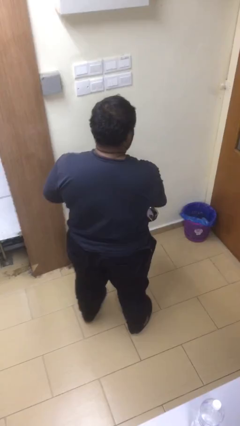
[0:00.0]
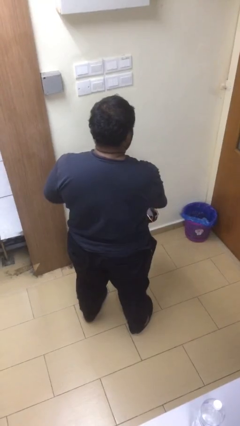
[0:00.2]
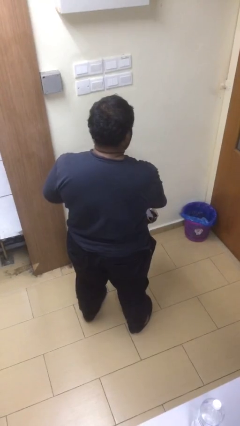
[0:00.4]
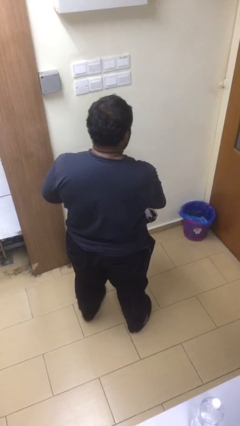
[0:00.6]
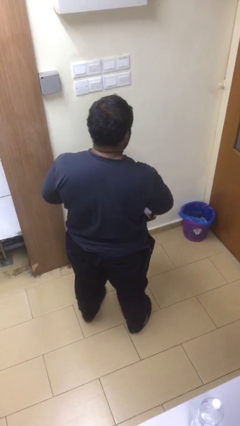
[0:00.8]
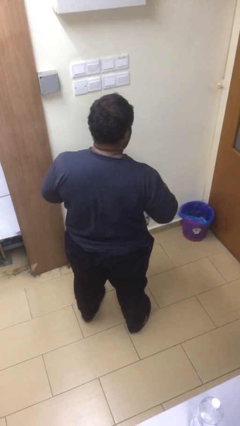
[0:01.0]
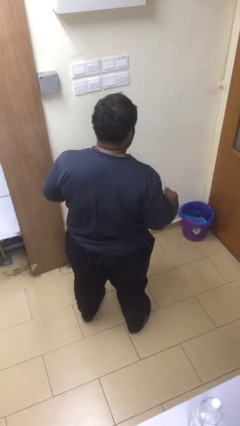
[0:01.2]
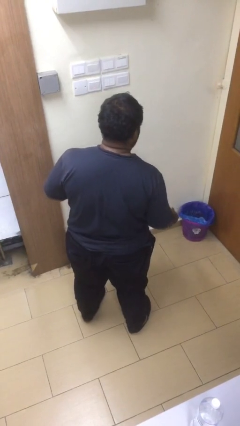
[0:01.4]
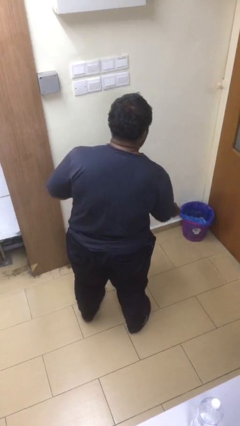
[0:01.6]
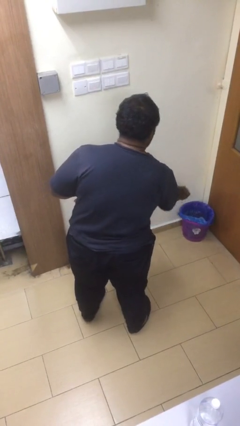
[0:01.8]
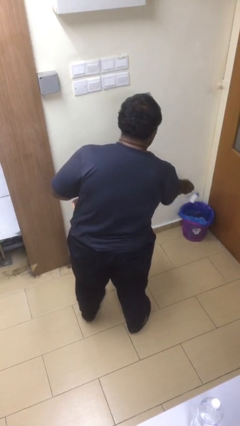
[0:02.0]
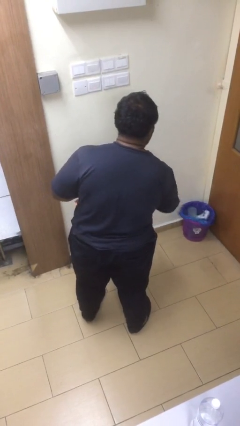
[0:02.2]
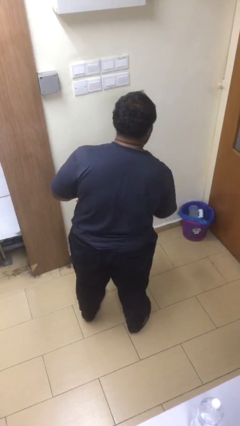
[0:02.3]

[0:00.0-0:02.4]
person discards trash

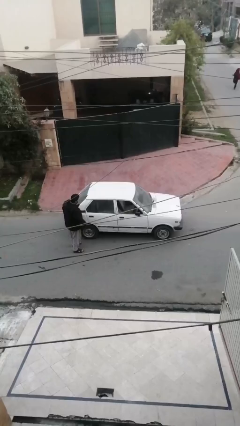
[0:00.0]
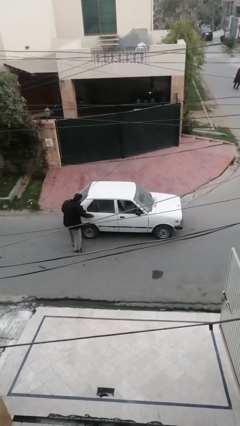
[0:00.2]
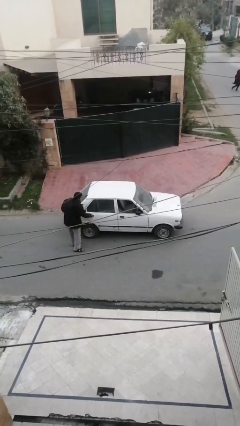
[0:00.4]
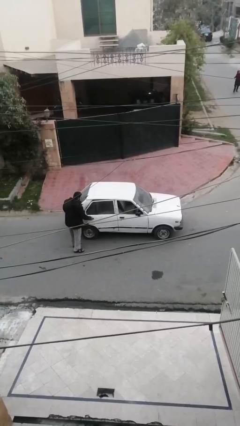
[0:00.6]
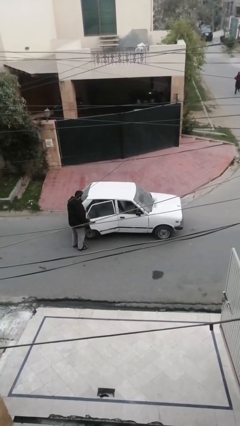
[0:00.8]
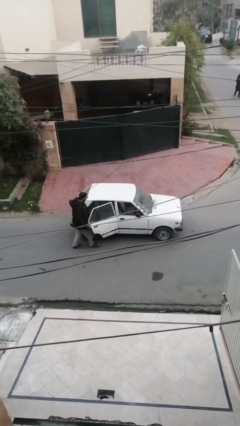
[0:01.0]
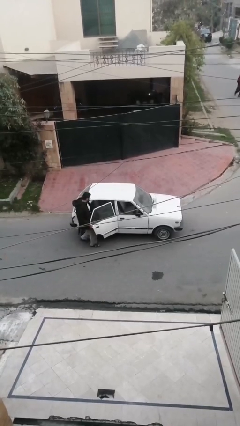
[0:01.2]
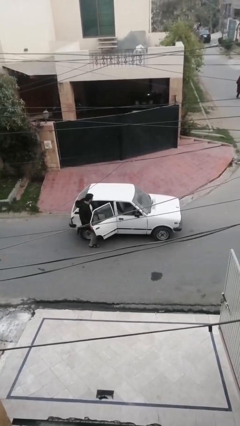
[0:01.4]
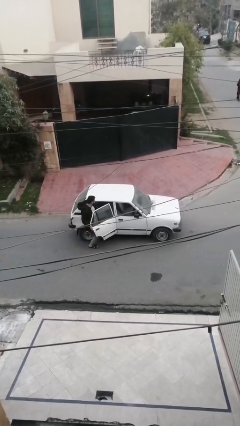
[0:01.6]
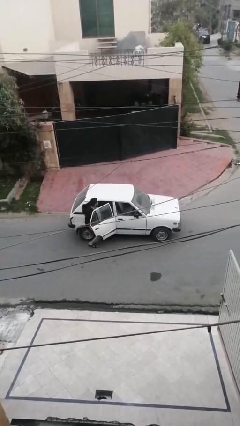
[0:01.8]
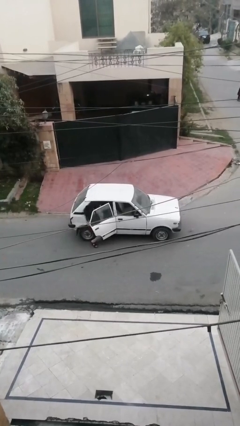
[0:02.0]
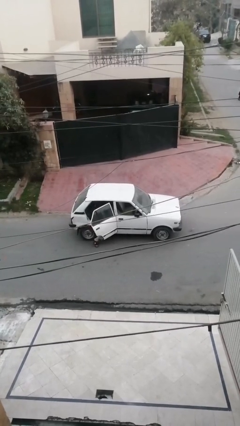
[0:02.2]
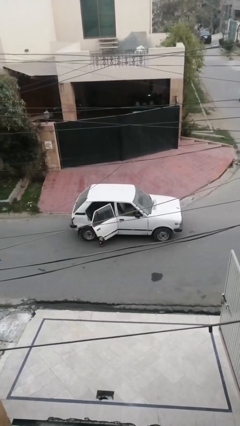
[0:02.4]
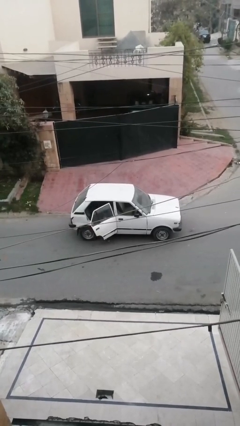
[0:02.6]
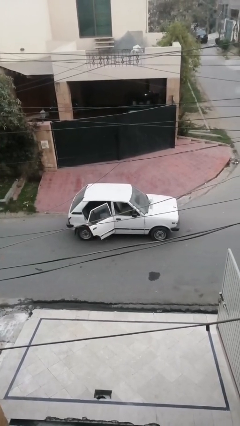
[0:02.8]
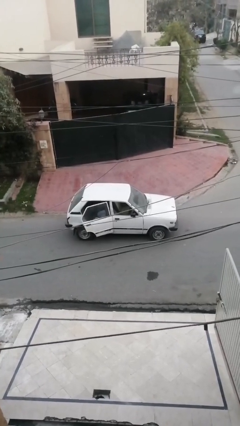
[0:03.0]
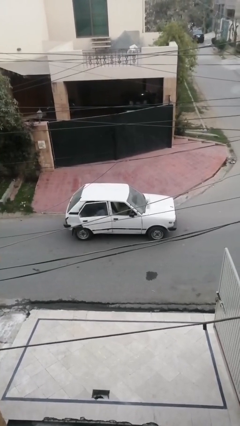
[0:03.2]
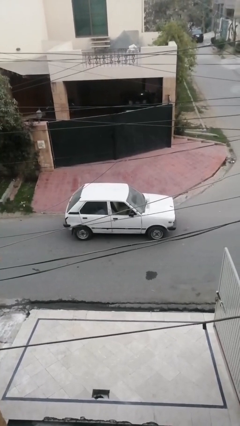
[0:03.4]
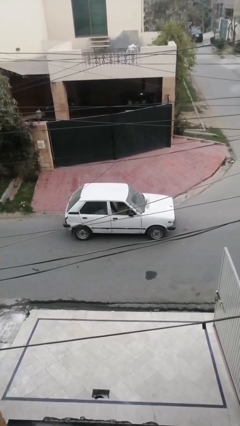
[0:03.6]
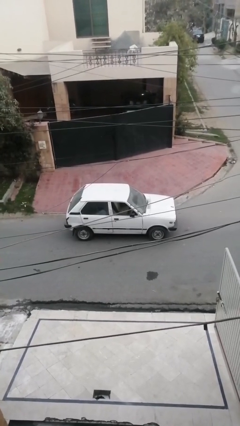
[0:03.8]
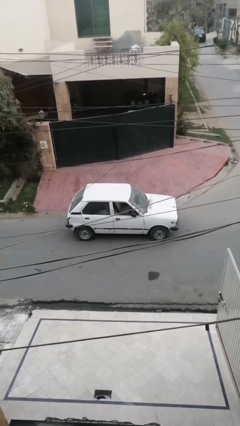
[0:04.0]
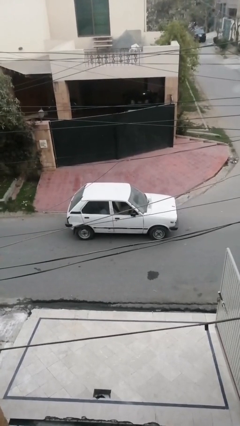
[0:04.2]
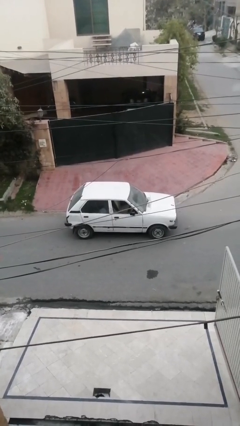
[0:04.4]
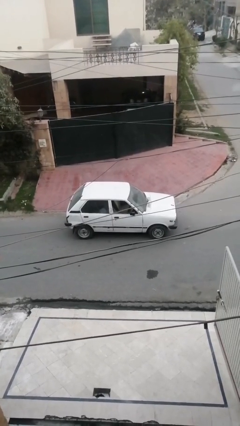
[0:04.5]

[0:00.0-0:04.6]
car picks up person

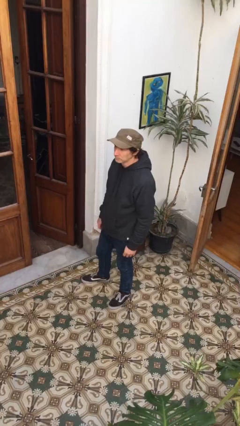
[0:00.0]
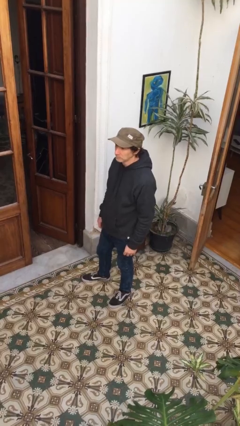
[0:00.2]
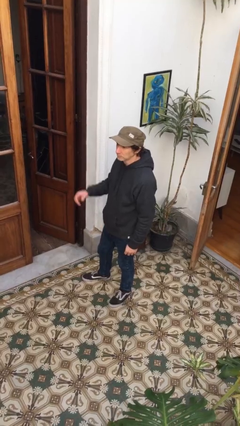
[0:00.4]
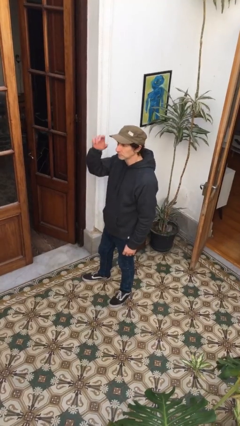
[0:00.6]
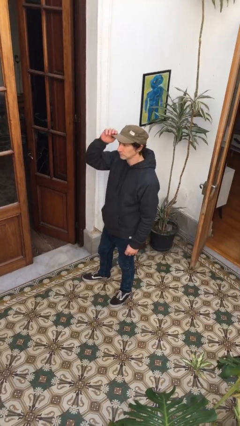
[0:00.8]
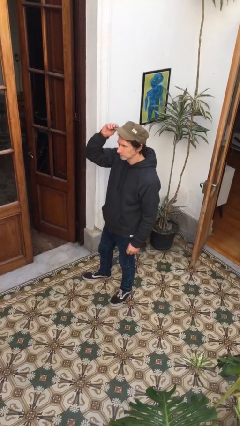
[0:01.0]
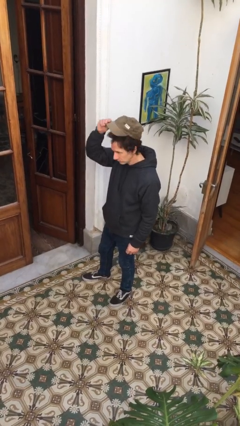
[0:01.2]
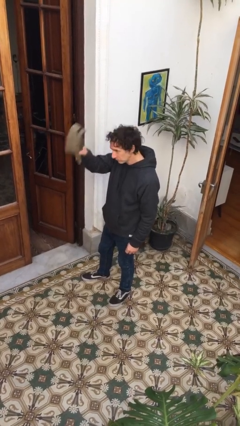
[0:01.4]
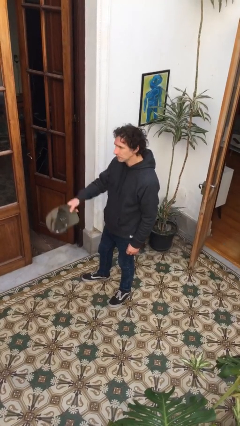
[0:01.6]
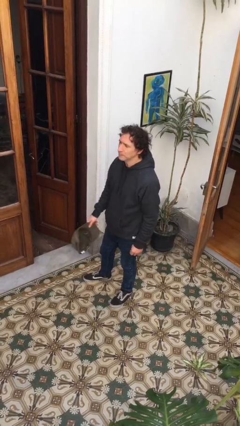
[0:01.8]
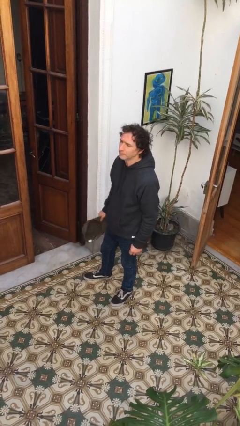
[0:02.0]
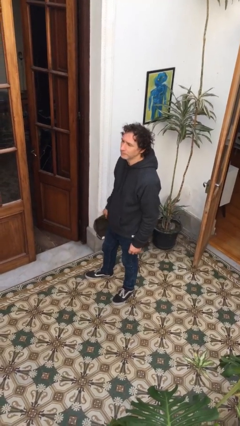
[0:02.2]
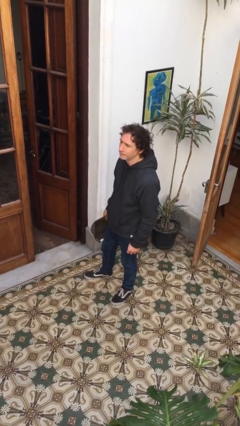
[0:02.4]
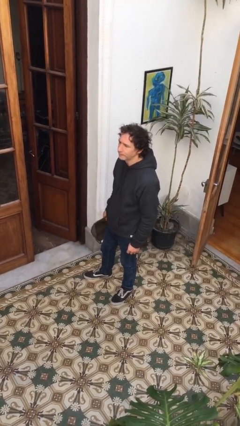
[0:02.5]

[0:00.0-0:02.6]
person takes off hat

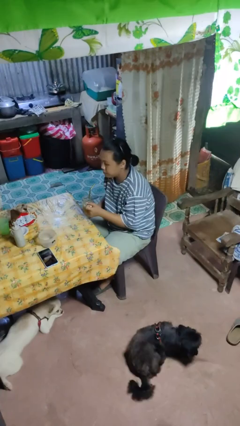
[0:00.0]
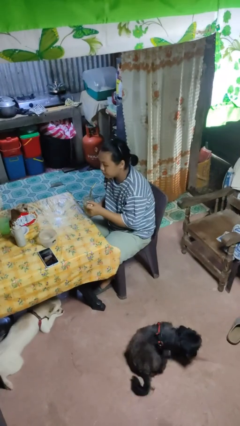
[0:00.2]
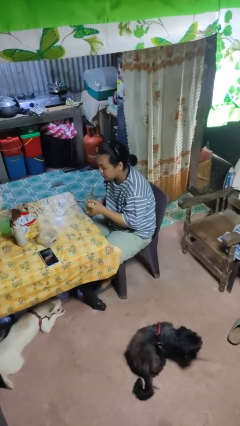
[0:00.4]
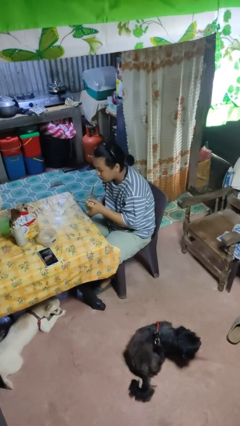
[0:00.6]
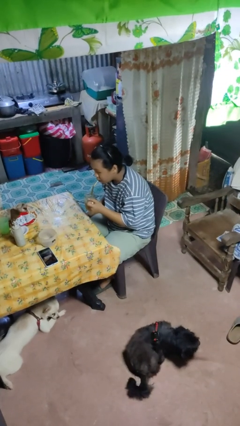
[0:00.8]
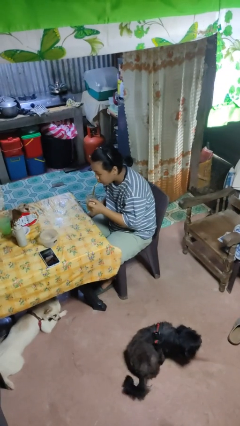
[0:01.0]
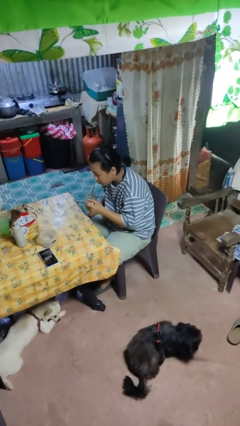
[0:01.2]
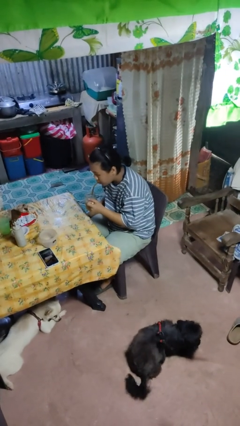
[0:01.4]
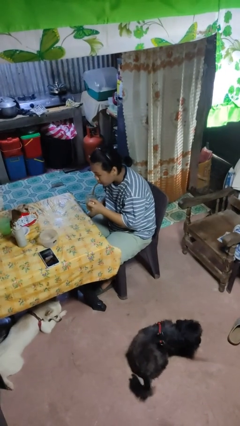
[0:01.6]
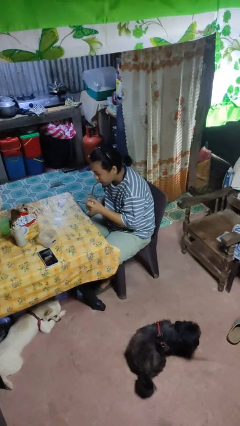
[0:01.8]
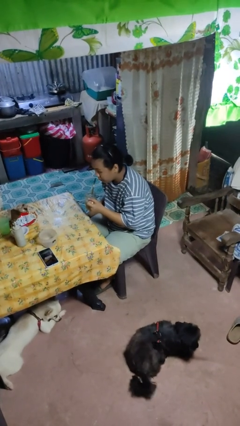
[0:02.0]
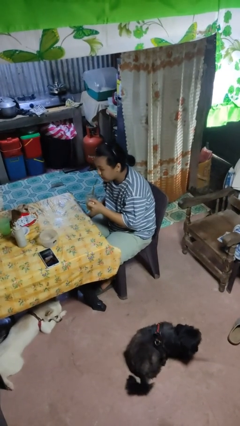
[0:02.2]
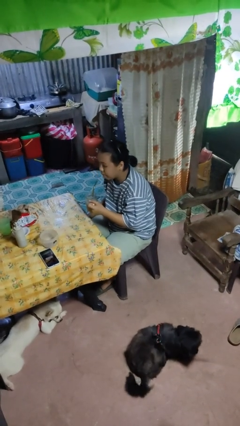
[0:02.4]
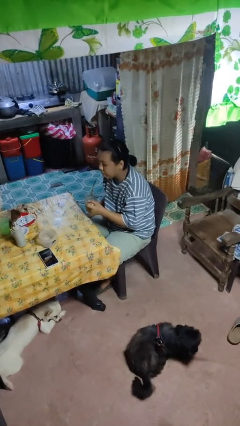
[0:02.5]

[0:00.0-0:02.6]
person drinks from straw

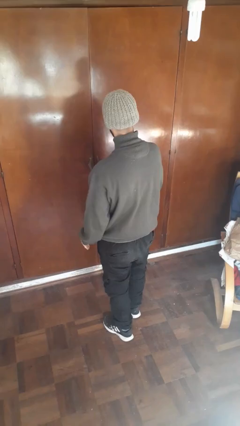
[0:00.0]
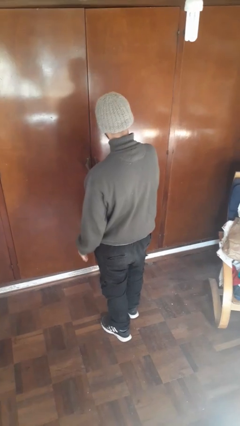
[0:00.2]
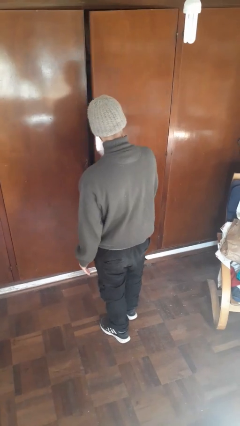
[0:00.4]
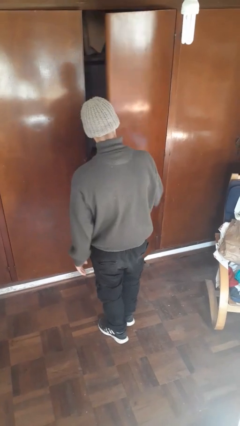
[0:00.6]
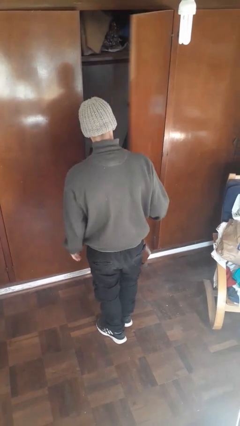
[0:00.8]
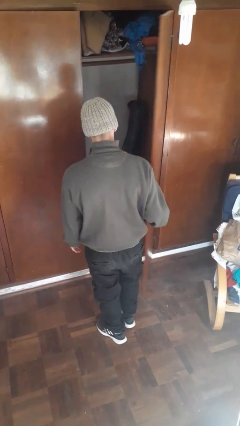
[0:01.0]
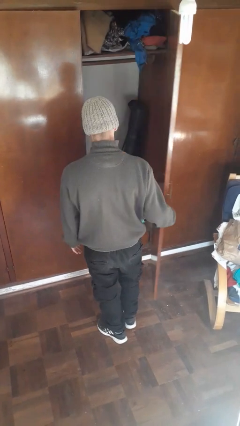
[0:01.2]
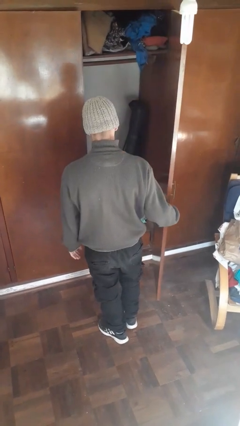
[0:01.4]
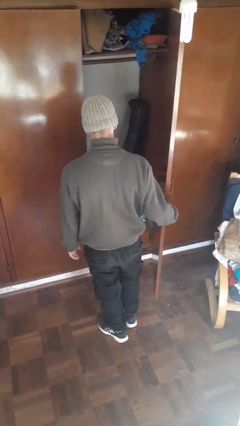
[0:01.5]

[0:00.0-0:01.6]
person opens closet door

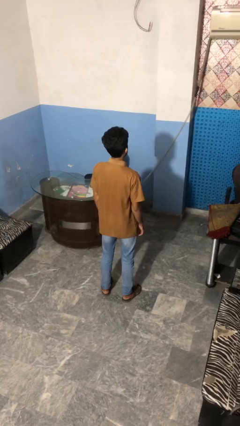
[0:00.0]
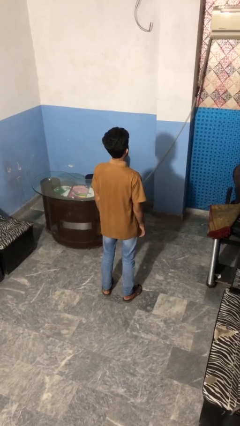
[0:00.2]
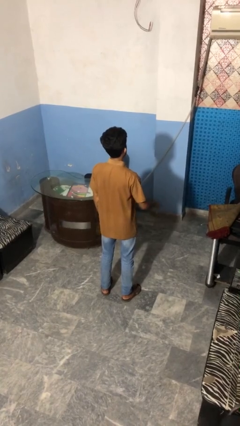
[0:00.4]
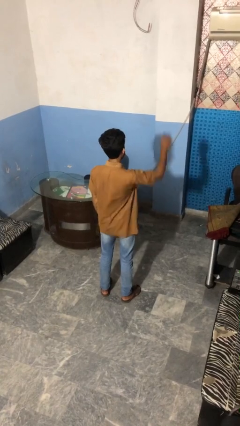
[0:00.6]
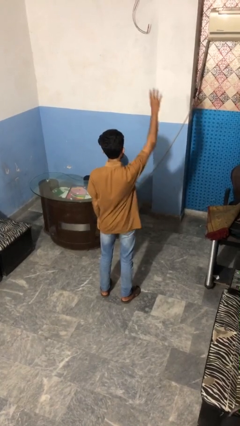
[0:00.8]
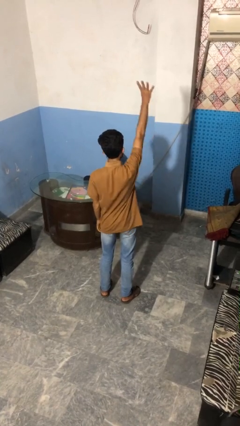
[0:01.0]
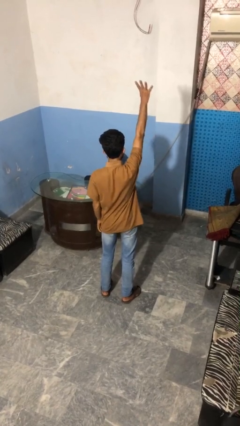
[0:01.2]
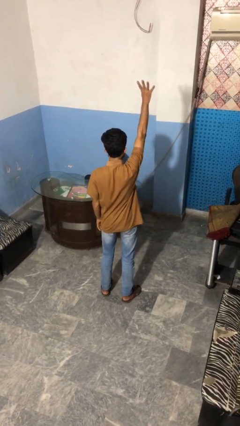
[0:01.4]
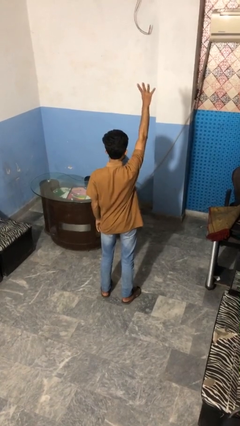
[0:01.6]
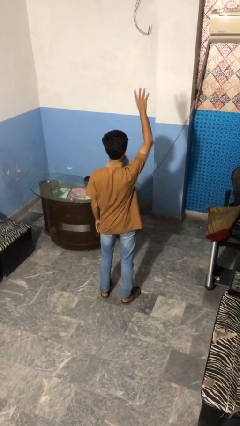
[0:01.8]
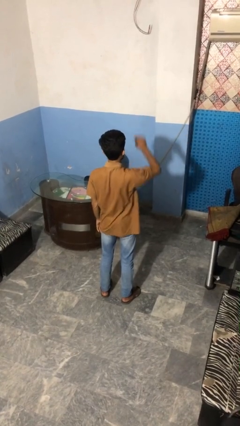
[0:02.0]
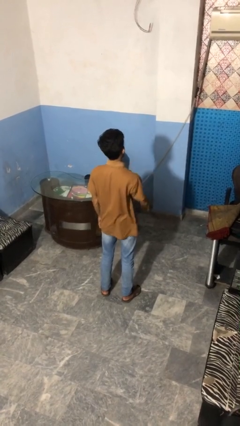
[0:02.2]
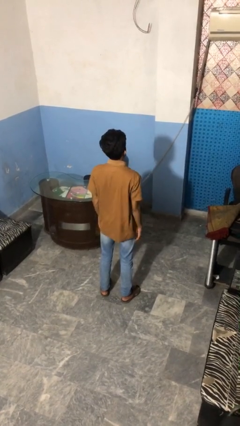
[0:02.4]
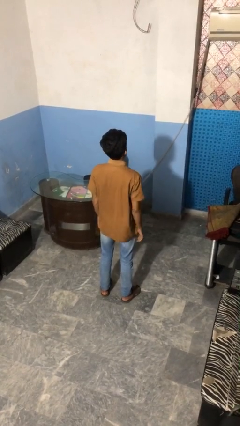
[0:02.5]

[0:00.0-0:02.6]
person gestures number four

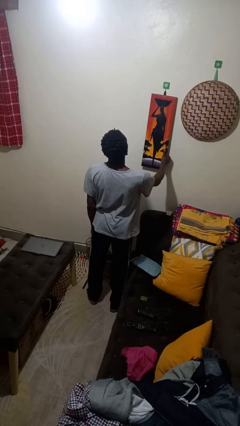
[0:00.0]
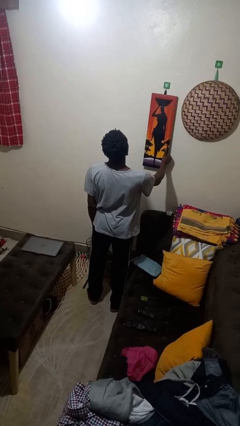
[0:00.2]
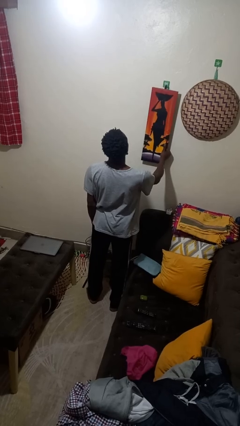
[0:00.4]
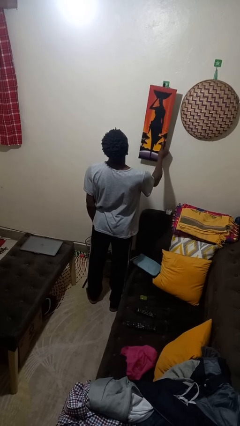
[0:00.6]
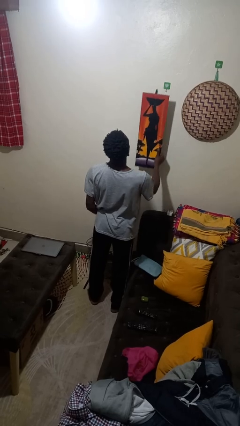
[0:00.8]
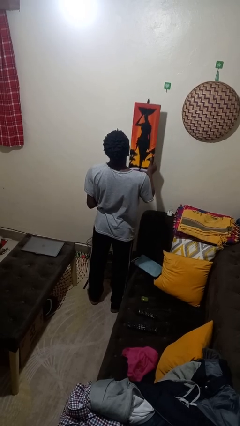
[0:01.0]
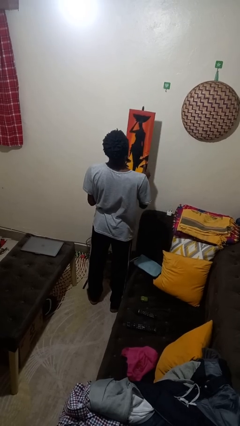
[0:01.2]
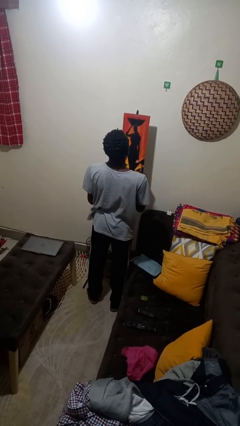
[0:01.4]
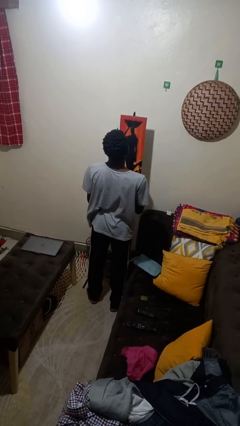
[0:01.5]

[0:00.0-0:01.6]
person takes down picture frame
